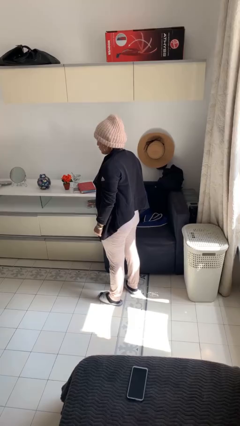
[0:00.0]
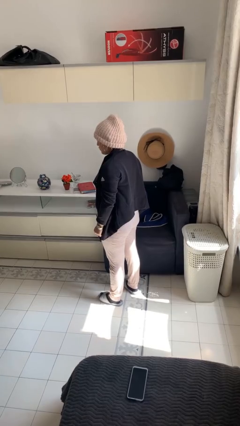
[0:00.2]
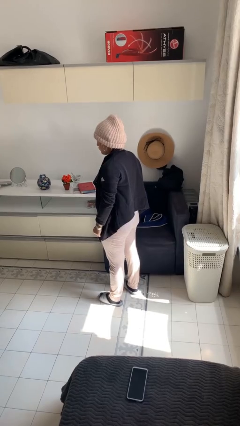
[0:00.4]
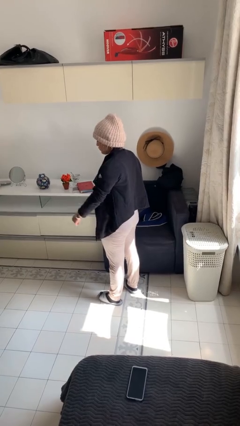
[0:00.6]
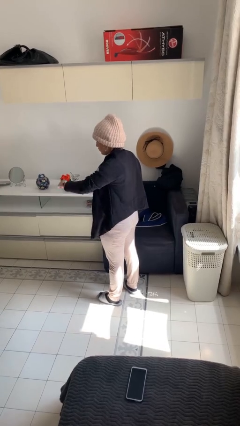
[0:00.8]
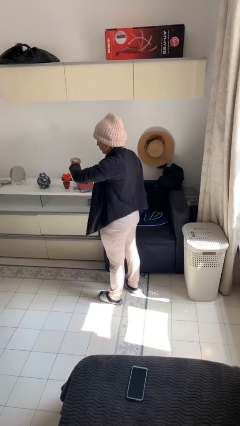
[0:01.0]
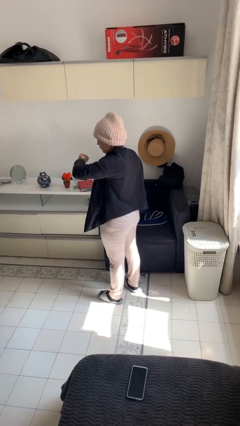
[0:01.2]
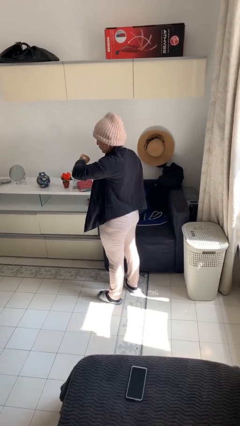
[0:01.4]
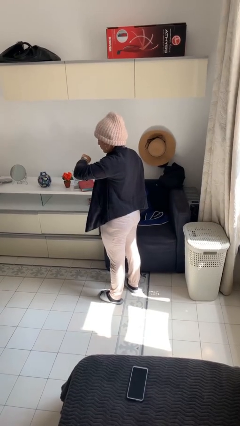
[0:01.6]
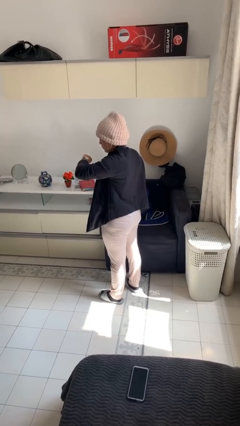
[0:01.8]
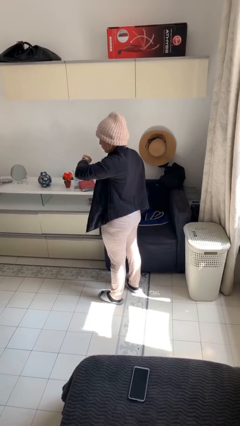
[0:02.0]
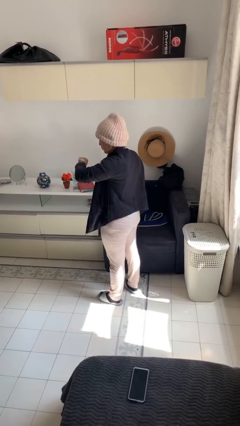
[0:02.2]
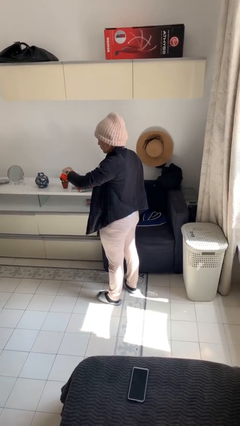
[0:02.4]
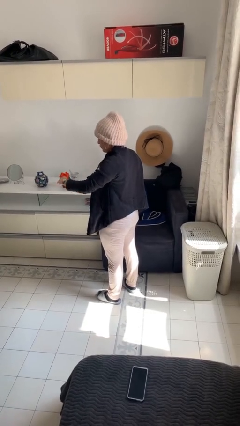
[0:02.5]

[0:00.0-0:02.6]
person looks at wristwatch

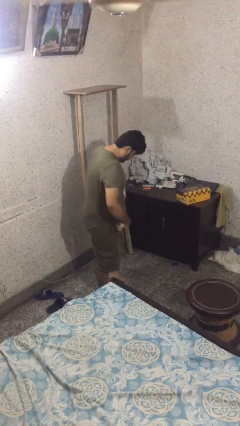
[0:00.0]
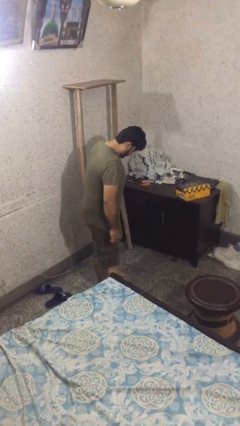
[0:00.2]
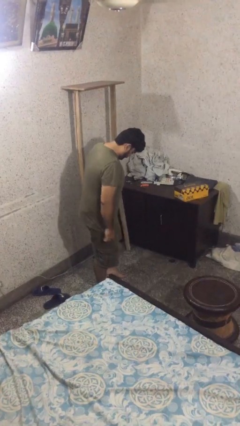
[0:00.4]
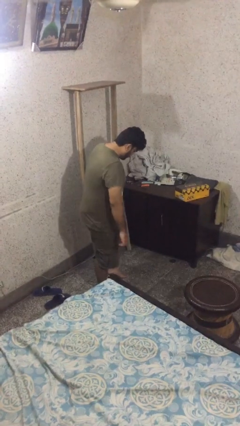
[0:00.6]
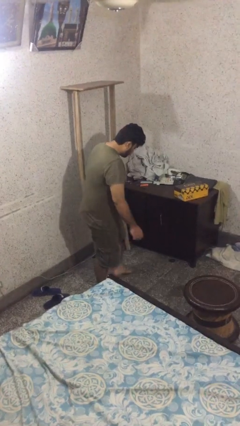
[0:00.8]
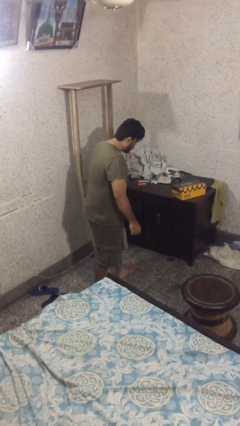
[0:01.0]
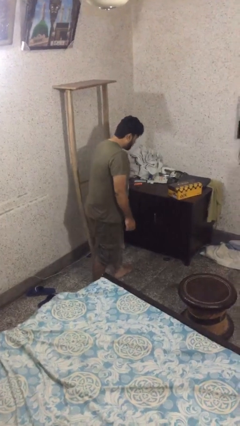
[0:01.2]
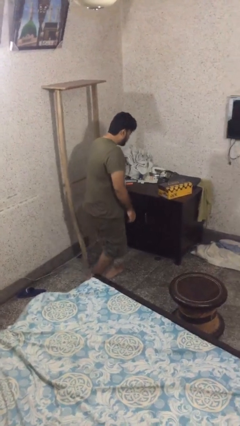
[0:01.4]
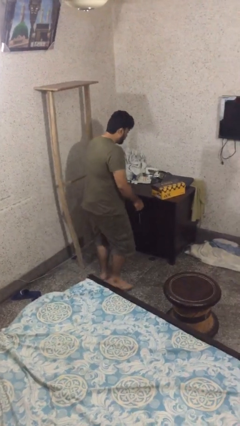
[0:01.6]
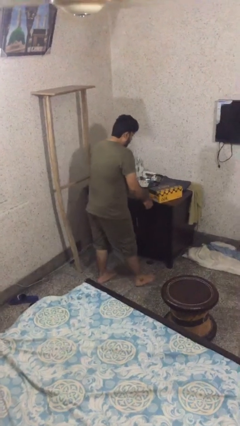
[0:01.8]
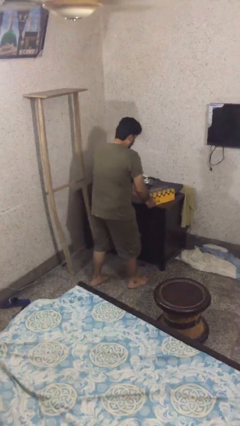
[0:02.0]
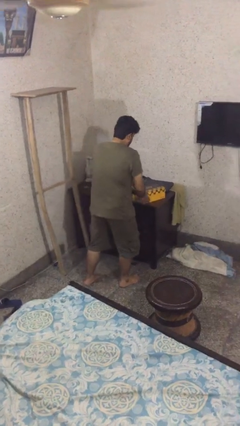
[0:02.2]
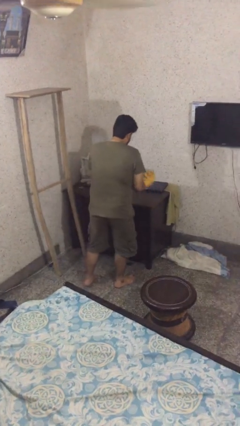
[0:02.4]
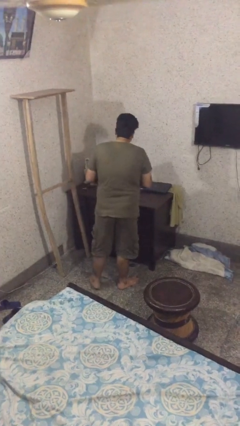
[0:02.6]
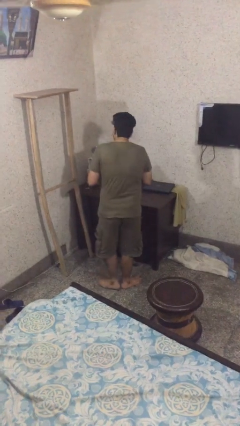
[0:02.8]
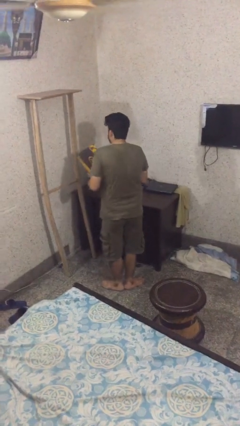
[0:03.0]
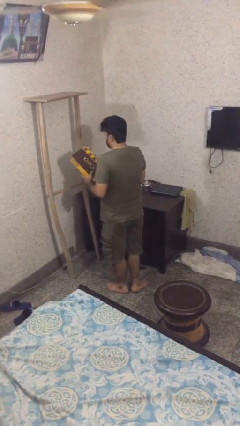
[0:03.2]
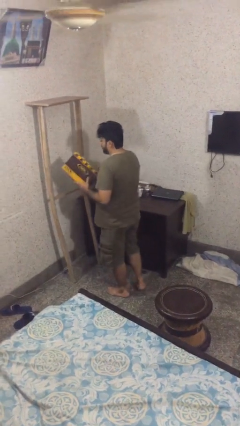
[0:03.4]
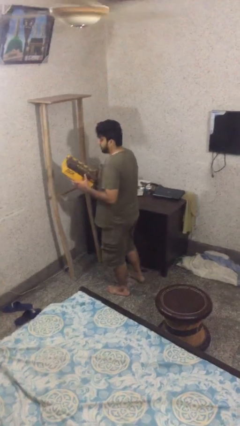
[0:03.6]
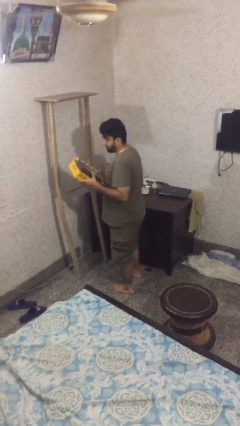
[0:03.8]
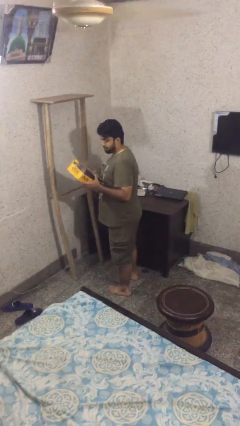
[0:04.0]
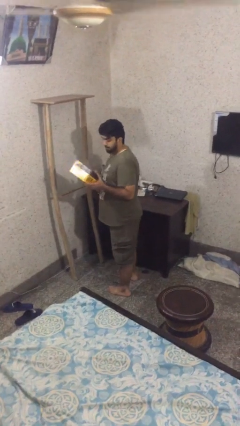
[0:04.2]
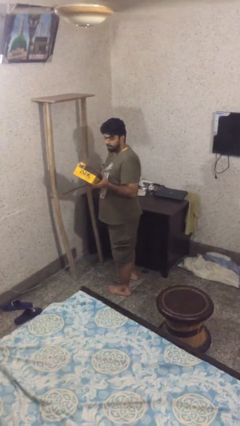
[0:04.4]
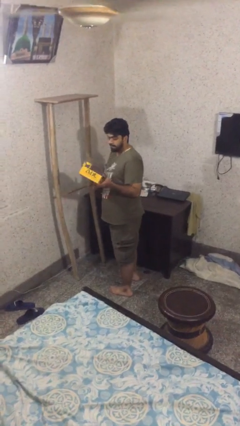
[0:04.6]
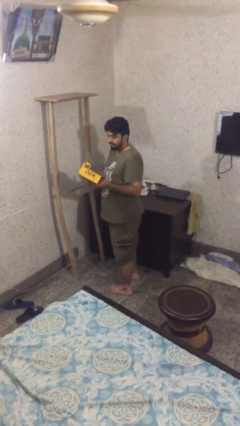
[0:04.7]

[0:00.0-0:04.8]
person picks up object from table

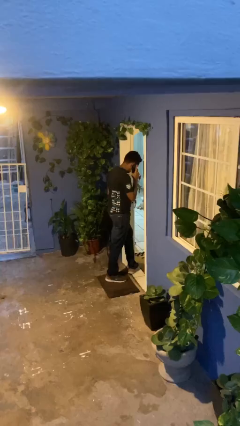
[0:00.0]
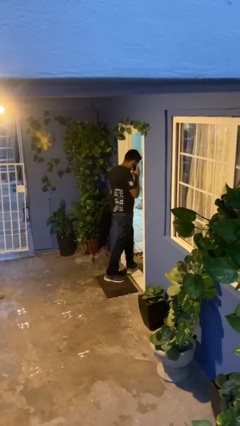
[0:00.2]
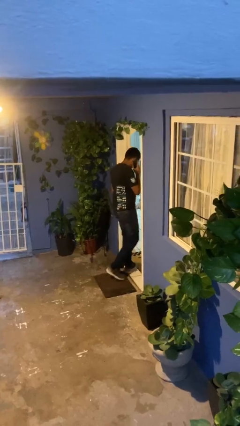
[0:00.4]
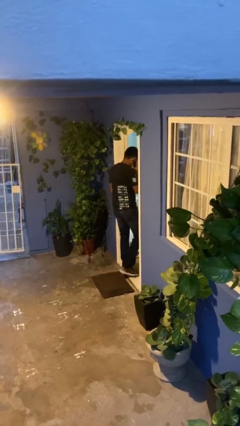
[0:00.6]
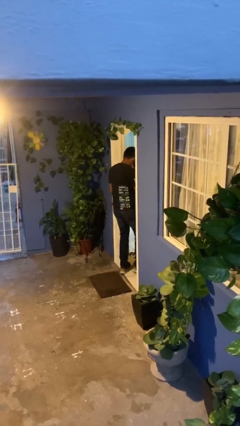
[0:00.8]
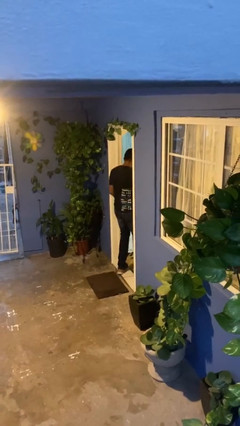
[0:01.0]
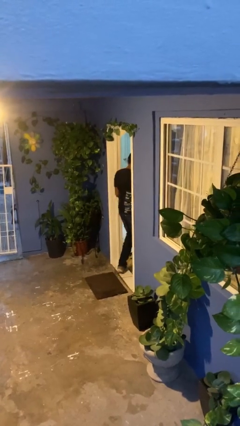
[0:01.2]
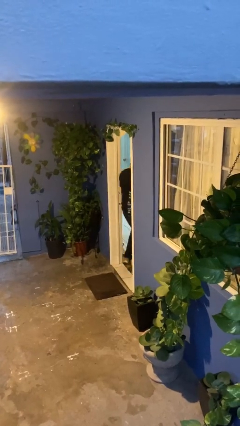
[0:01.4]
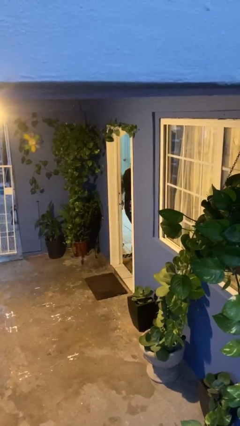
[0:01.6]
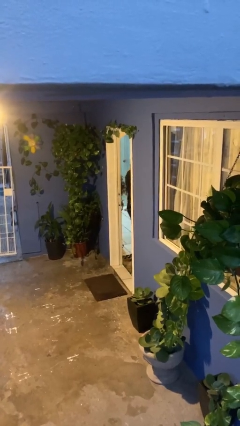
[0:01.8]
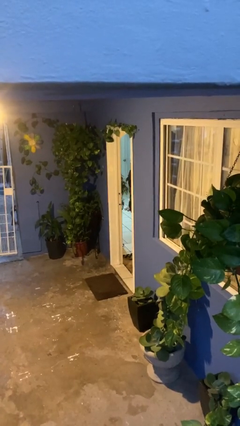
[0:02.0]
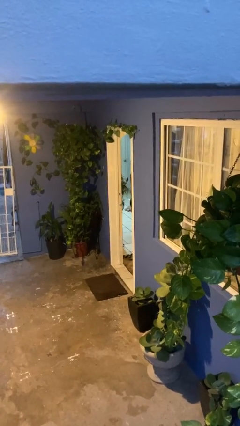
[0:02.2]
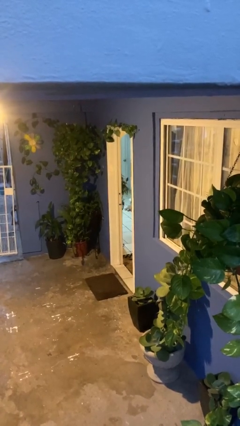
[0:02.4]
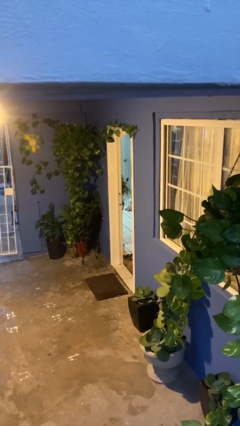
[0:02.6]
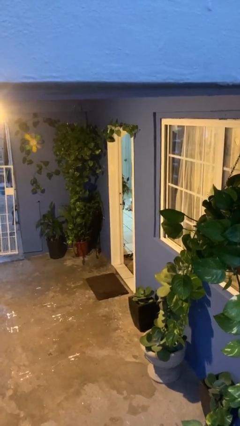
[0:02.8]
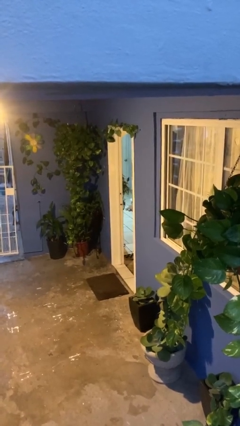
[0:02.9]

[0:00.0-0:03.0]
person exits scene through structure

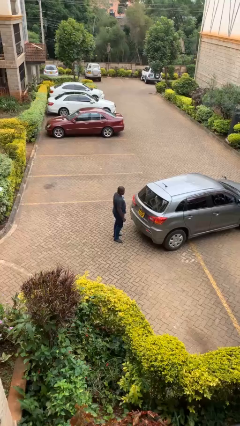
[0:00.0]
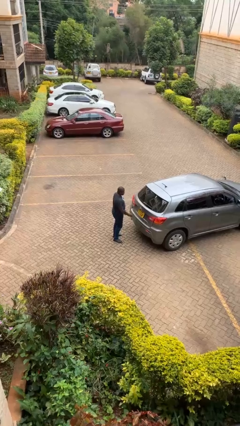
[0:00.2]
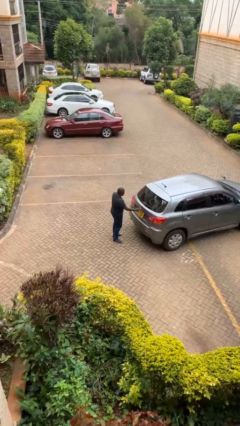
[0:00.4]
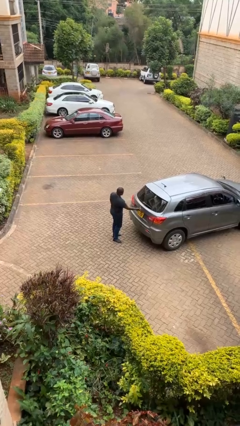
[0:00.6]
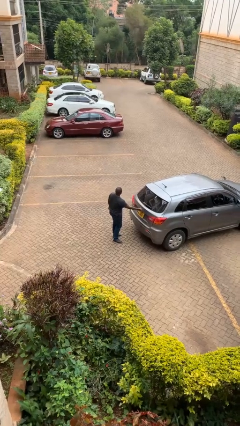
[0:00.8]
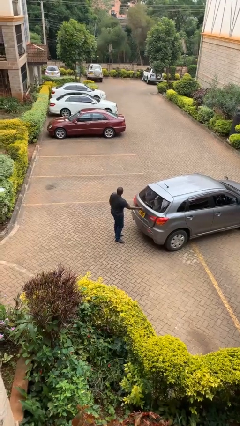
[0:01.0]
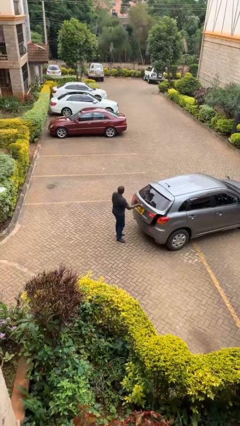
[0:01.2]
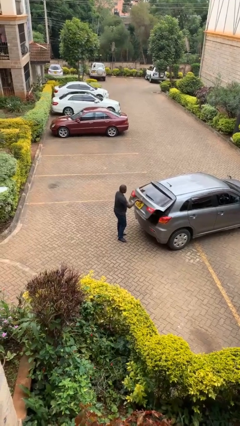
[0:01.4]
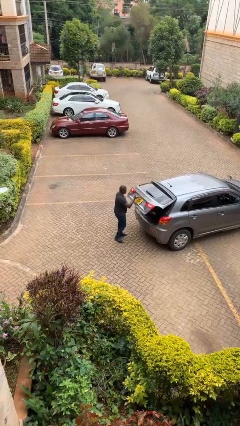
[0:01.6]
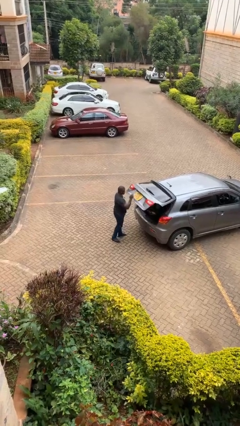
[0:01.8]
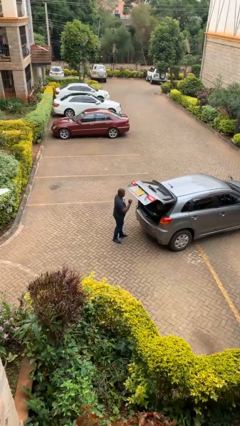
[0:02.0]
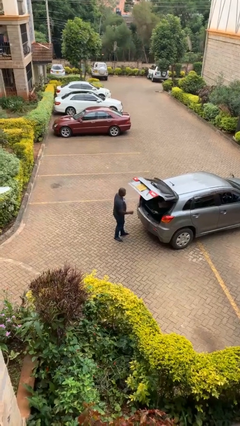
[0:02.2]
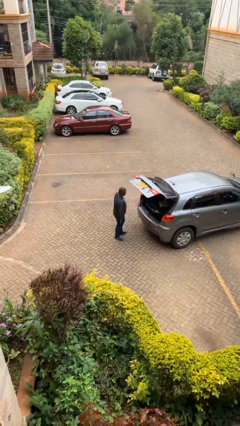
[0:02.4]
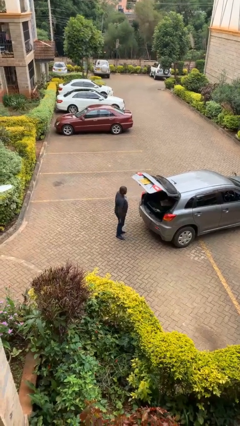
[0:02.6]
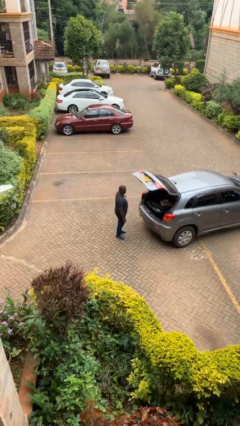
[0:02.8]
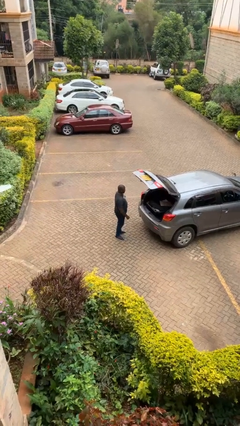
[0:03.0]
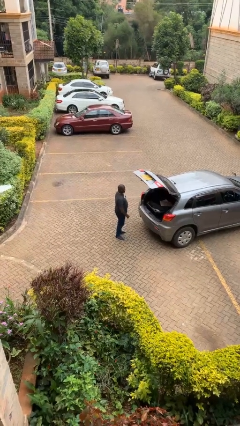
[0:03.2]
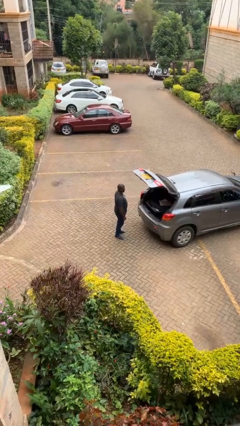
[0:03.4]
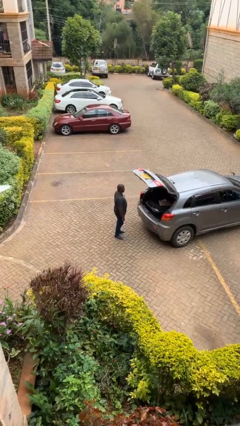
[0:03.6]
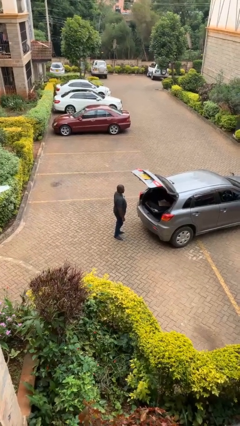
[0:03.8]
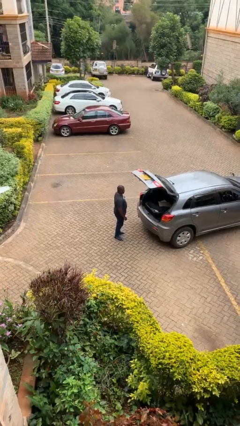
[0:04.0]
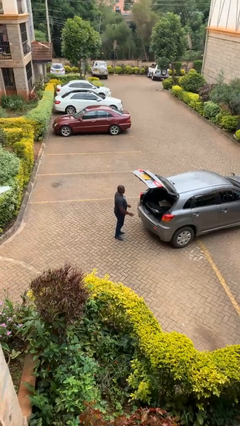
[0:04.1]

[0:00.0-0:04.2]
person opens car trunk

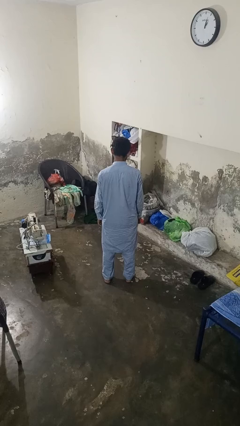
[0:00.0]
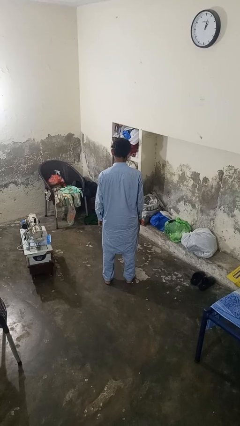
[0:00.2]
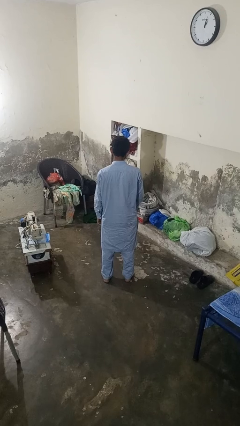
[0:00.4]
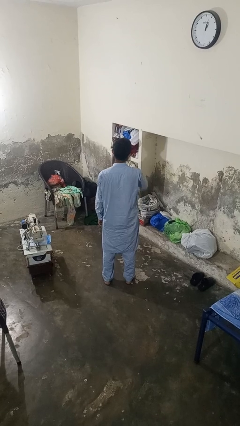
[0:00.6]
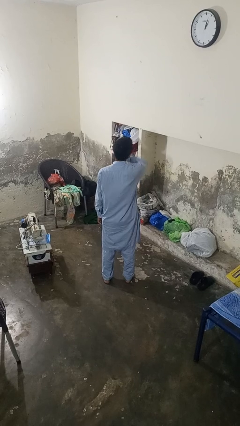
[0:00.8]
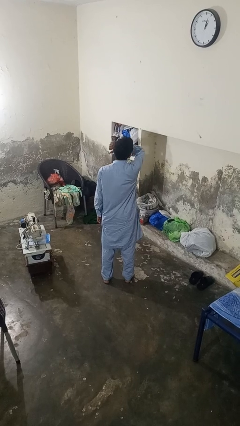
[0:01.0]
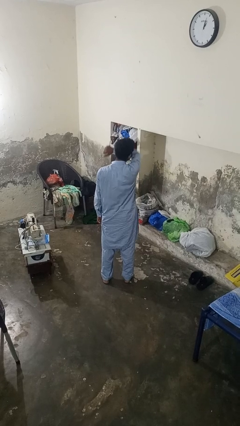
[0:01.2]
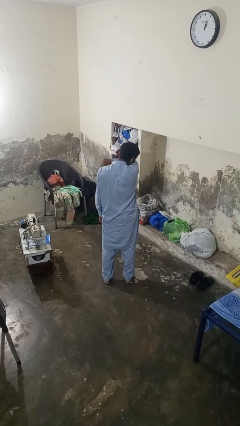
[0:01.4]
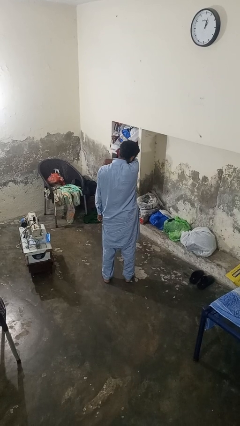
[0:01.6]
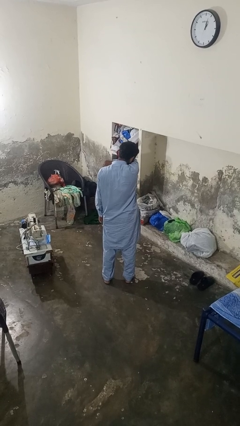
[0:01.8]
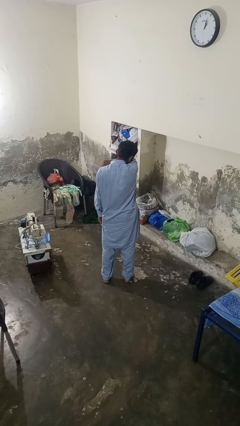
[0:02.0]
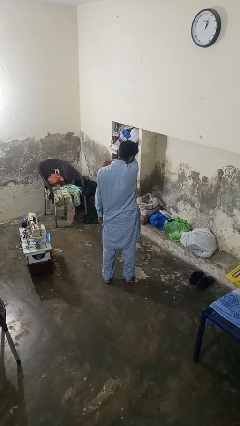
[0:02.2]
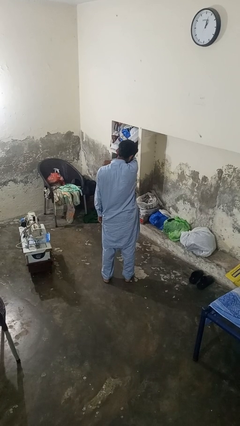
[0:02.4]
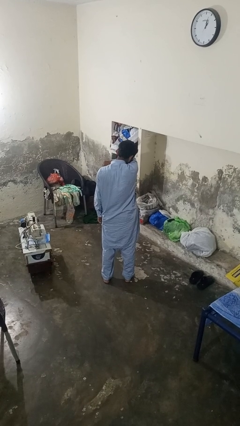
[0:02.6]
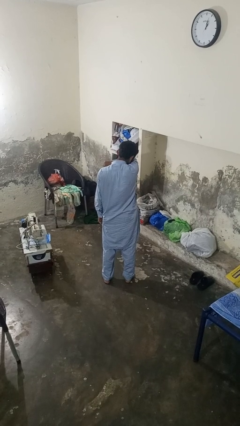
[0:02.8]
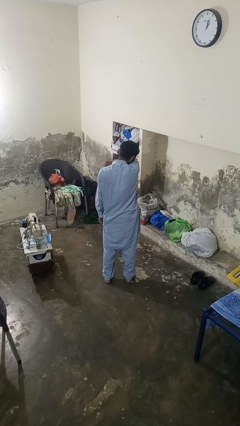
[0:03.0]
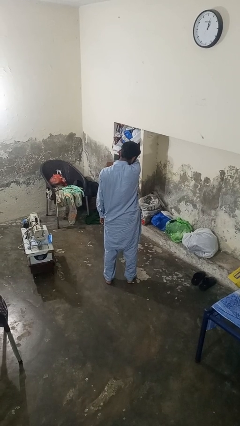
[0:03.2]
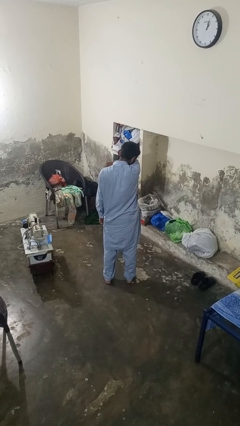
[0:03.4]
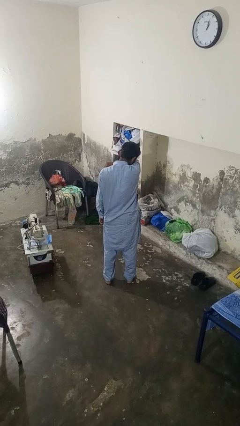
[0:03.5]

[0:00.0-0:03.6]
person sneezes into arm
